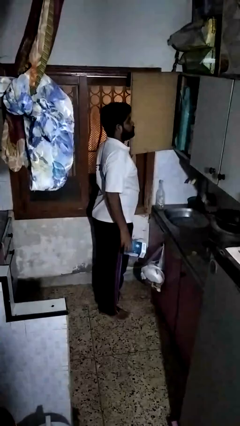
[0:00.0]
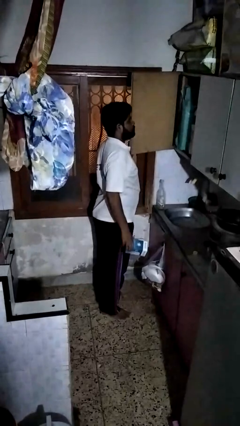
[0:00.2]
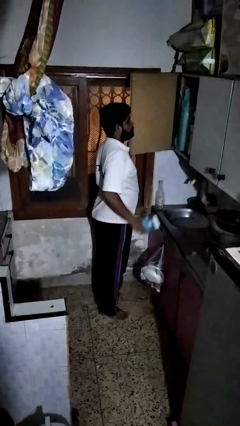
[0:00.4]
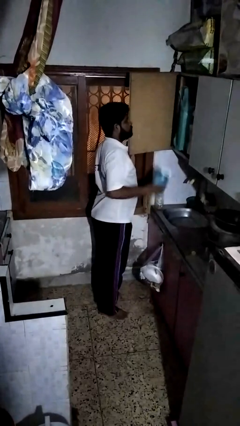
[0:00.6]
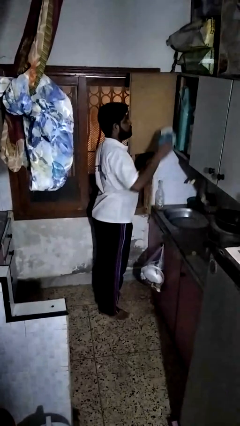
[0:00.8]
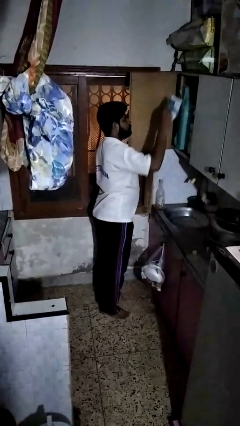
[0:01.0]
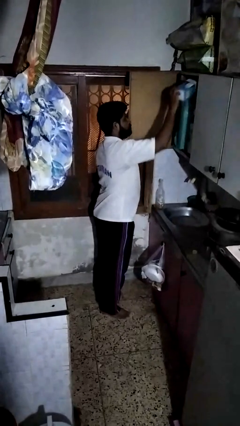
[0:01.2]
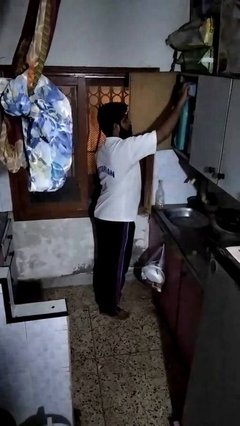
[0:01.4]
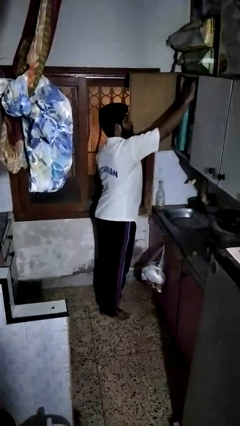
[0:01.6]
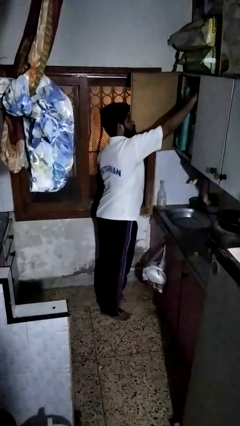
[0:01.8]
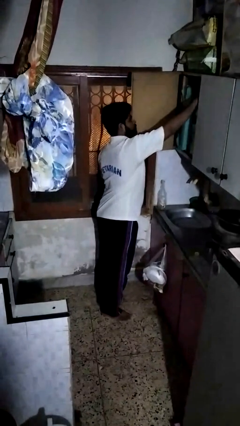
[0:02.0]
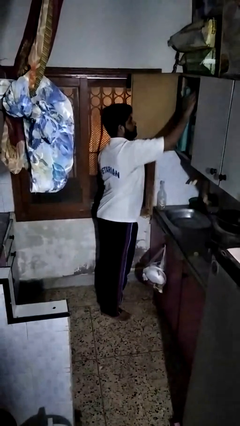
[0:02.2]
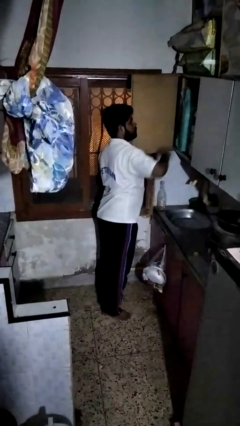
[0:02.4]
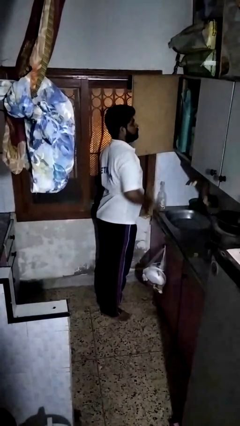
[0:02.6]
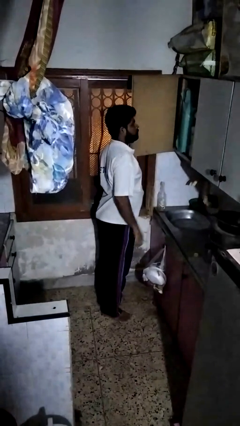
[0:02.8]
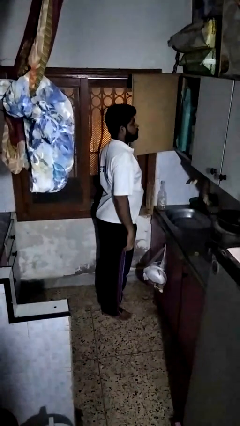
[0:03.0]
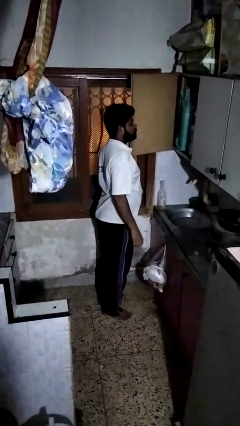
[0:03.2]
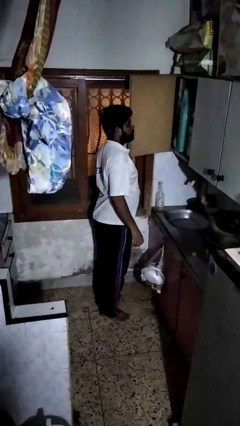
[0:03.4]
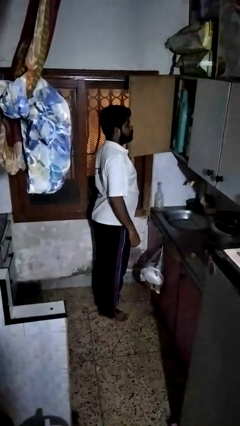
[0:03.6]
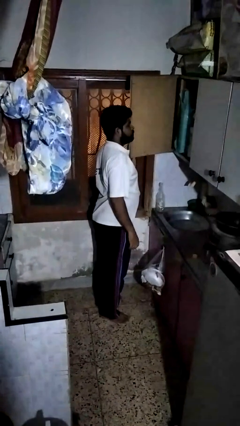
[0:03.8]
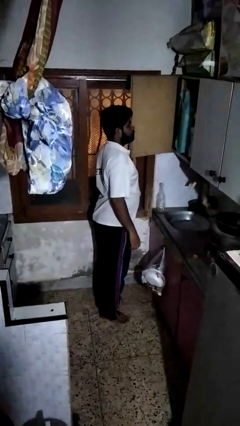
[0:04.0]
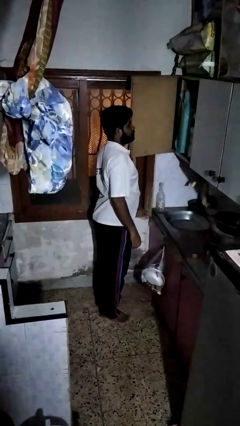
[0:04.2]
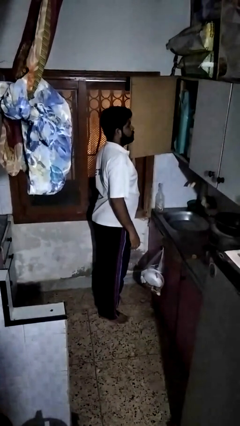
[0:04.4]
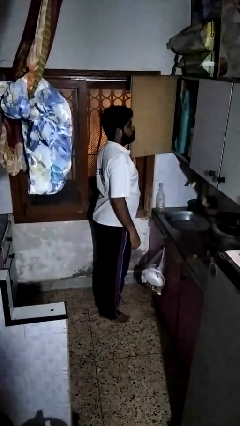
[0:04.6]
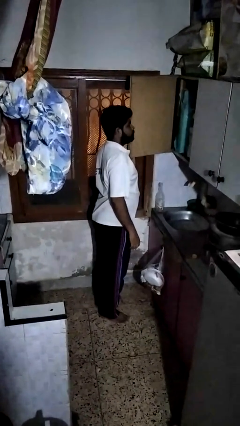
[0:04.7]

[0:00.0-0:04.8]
person puts down object into cabinet

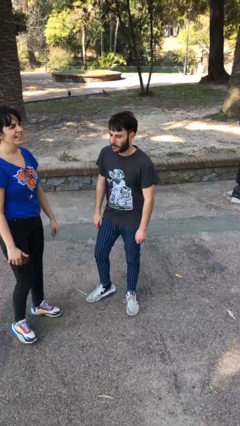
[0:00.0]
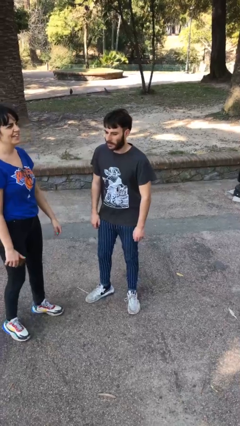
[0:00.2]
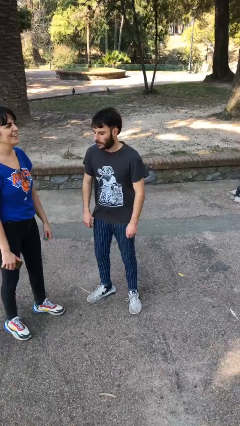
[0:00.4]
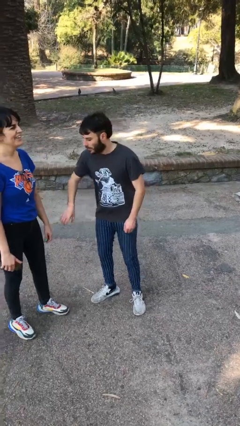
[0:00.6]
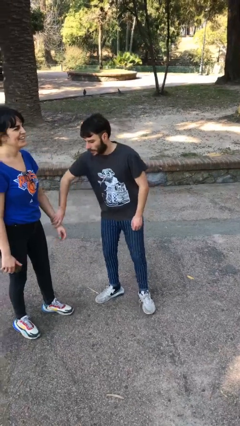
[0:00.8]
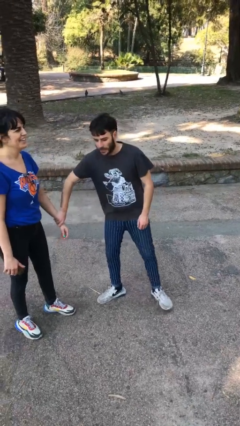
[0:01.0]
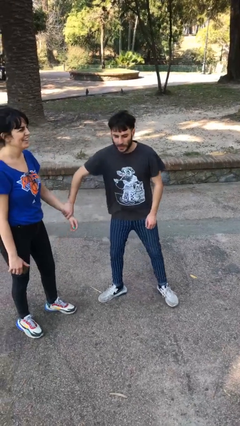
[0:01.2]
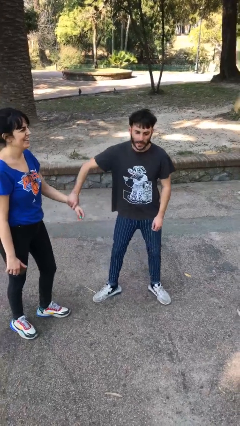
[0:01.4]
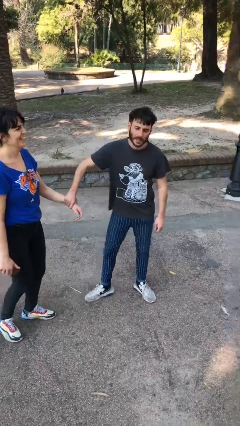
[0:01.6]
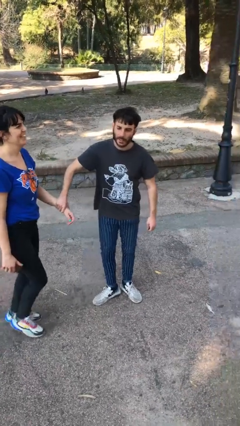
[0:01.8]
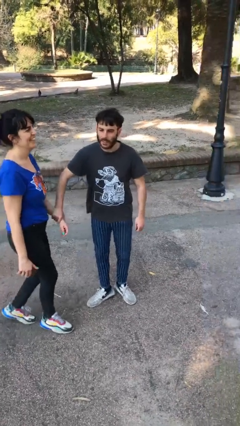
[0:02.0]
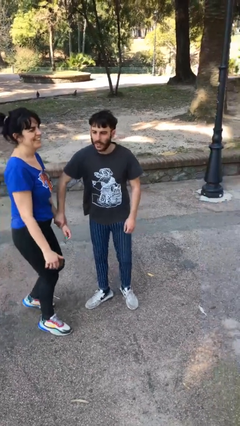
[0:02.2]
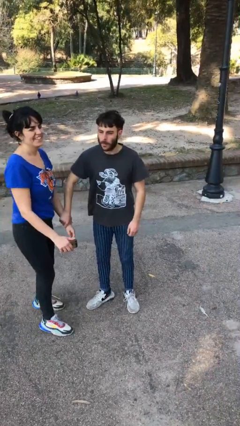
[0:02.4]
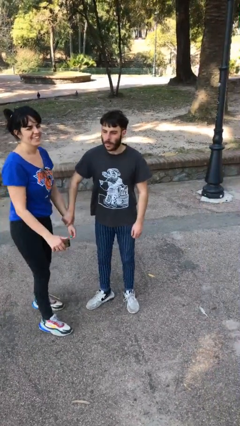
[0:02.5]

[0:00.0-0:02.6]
person grabs person by forearm

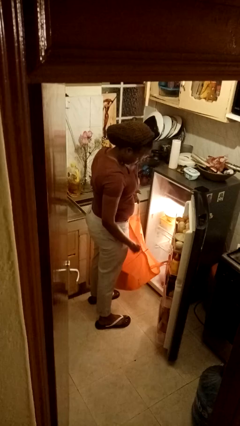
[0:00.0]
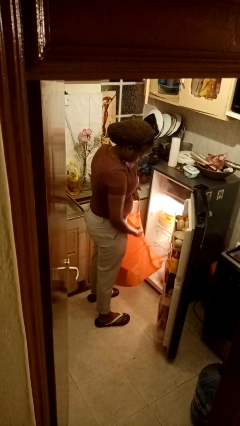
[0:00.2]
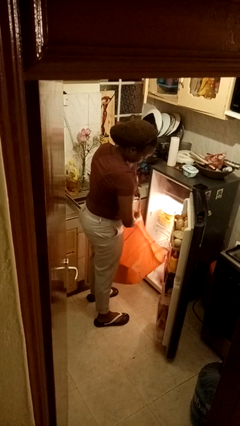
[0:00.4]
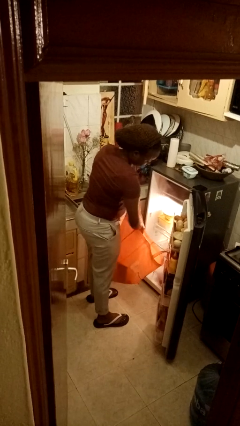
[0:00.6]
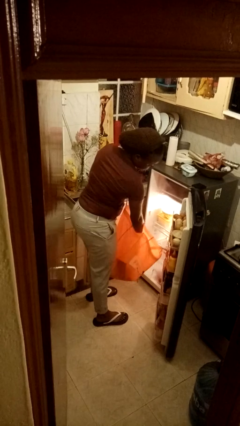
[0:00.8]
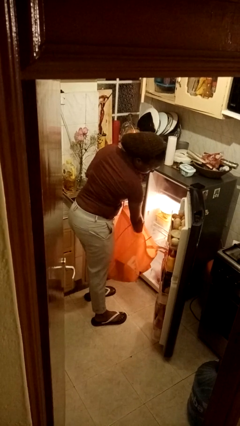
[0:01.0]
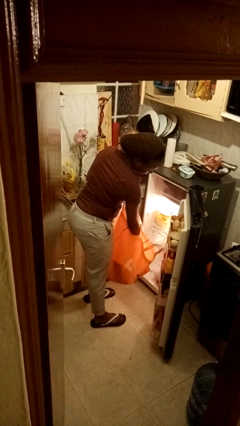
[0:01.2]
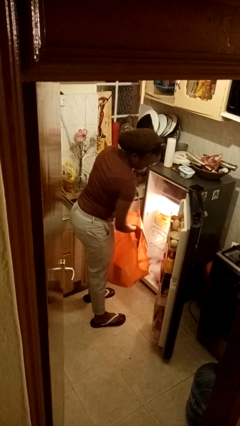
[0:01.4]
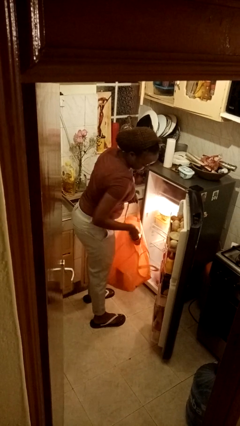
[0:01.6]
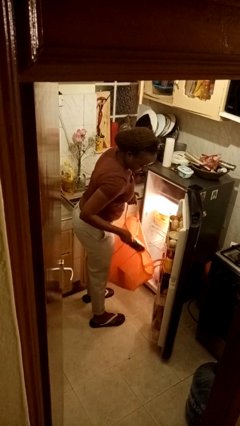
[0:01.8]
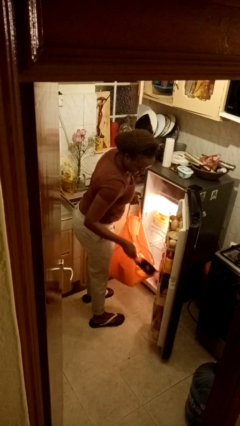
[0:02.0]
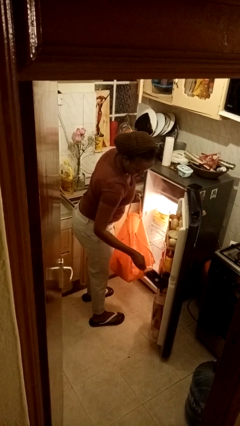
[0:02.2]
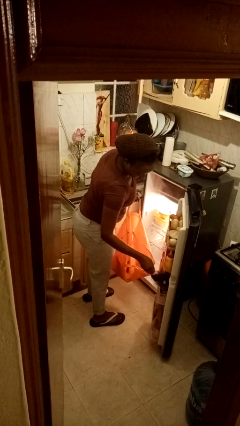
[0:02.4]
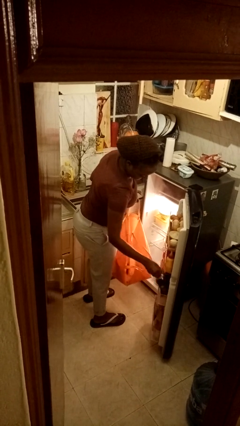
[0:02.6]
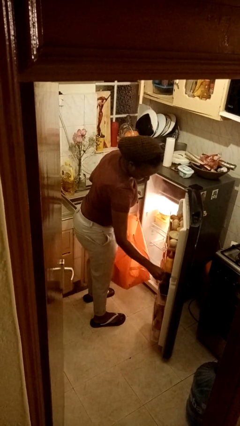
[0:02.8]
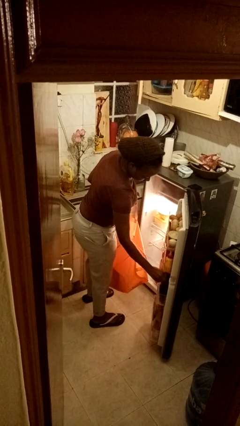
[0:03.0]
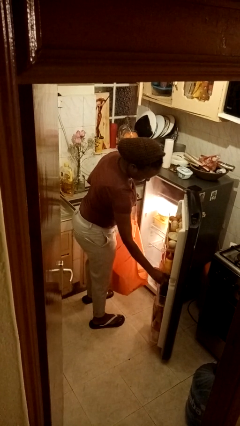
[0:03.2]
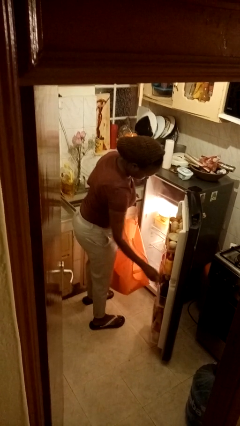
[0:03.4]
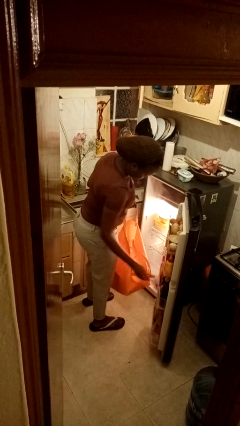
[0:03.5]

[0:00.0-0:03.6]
person loads groceries into refrigerator

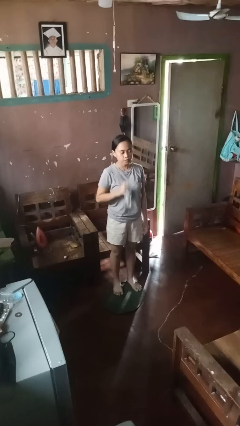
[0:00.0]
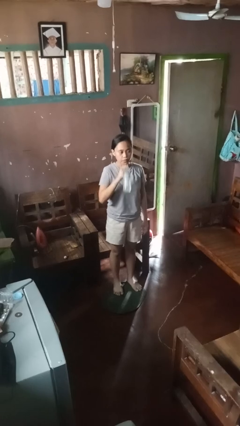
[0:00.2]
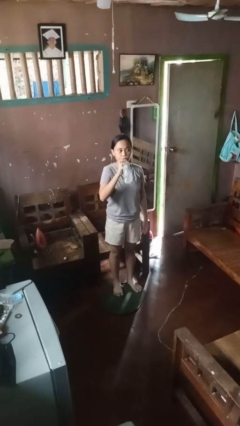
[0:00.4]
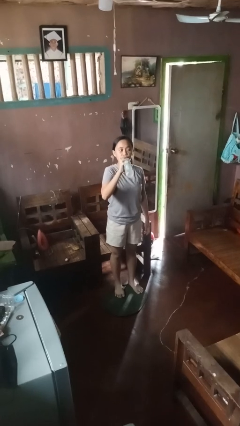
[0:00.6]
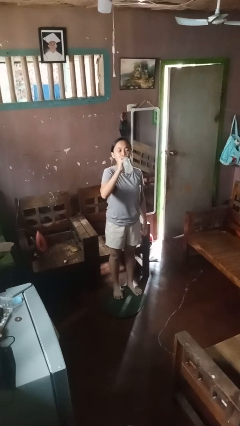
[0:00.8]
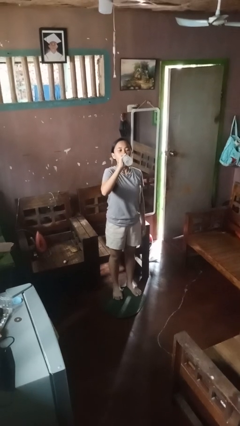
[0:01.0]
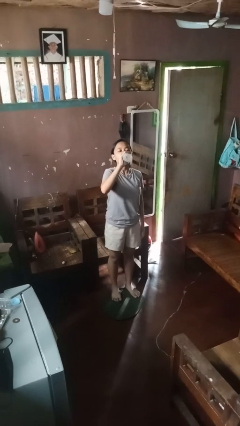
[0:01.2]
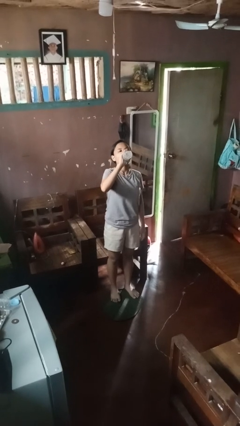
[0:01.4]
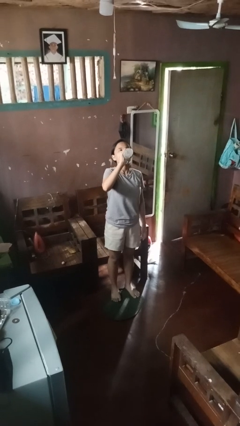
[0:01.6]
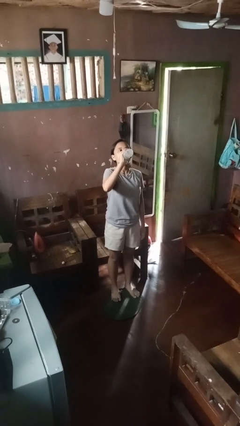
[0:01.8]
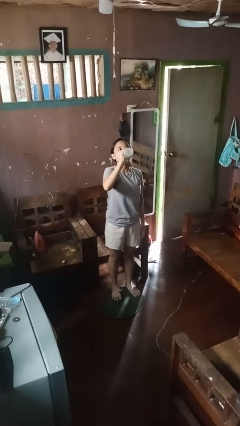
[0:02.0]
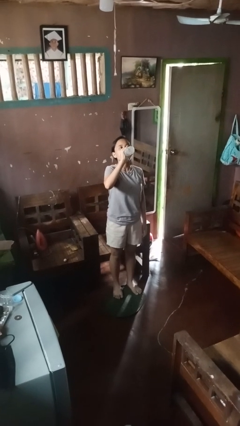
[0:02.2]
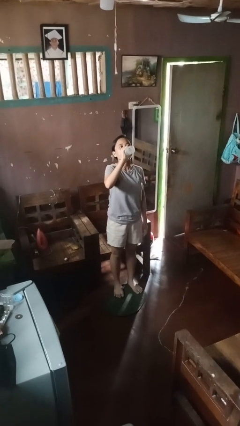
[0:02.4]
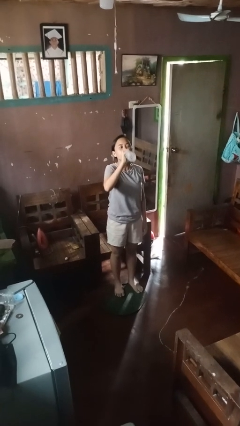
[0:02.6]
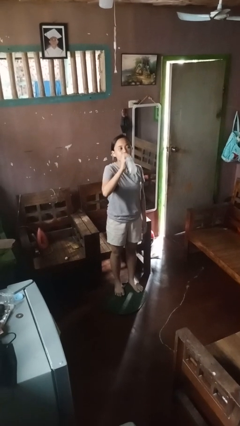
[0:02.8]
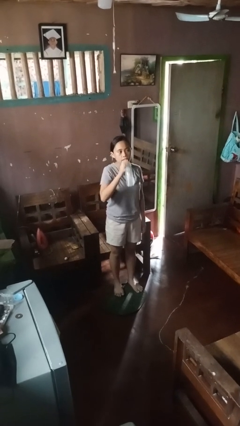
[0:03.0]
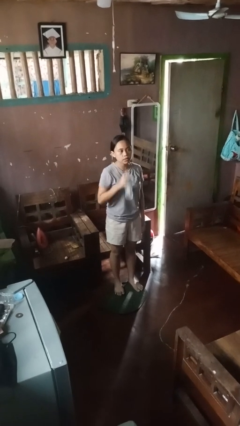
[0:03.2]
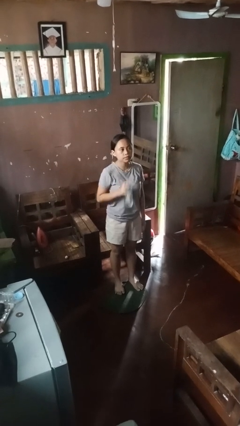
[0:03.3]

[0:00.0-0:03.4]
person drinks from bottle

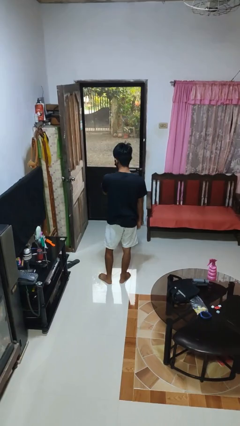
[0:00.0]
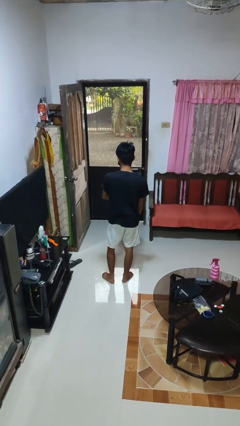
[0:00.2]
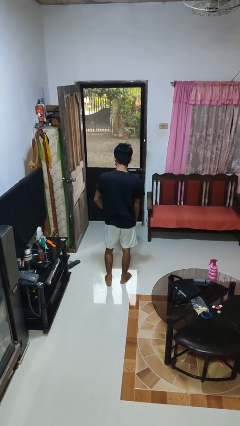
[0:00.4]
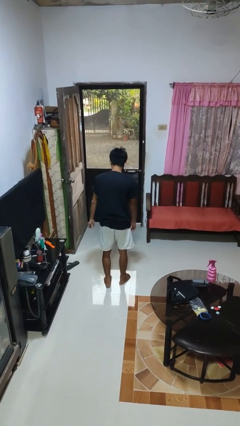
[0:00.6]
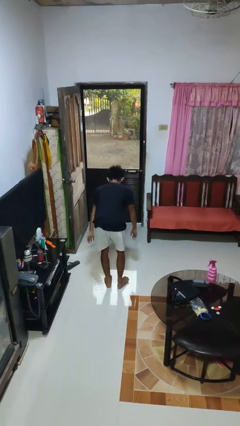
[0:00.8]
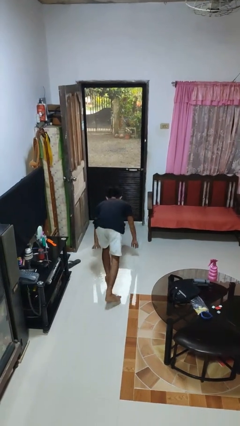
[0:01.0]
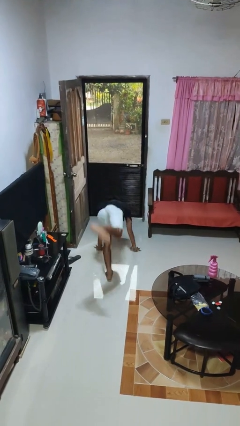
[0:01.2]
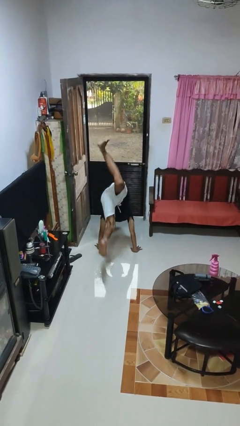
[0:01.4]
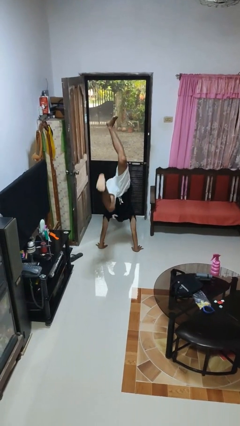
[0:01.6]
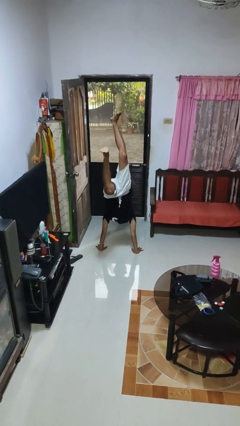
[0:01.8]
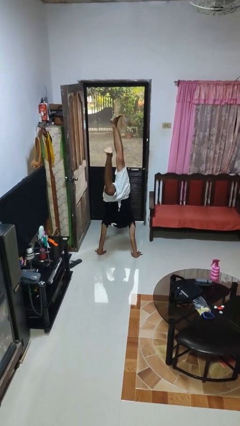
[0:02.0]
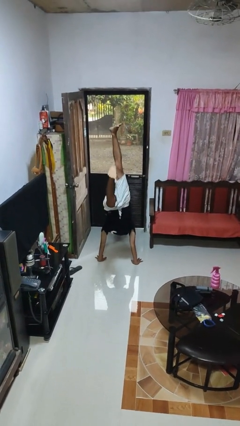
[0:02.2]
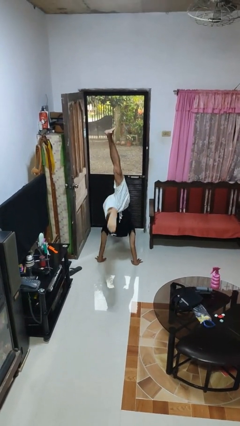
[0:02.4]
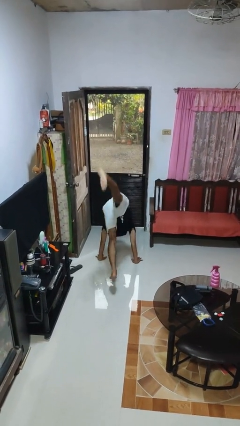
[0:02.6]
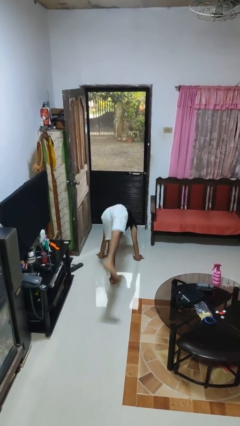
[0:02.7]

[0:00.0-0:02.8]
person handstand

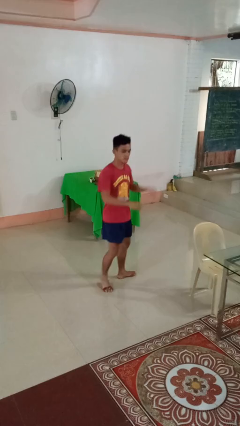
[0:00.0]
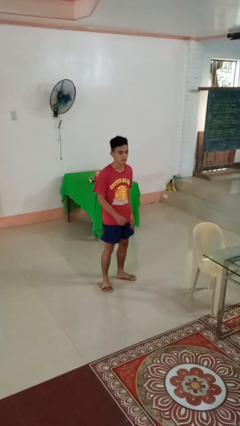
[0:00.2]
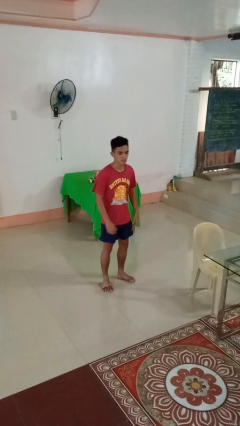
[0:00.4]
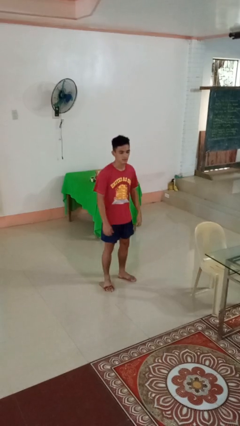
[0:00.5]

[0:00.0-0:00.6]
person karate chop
